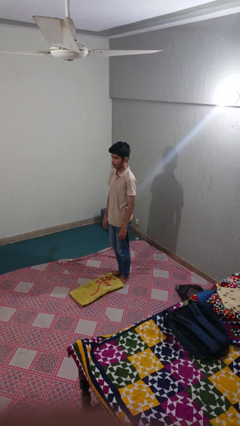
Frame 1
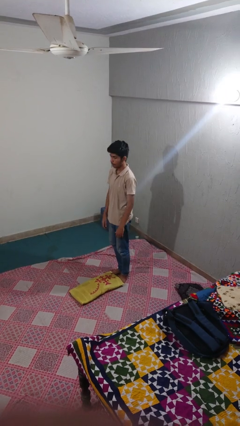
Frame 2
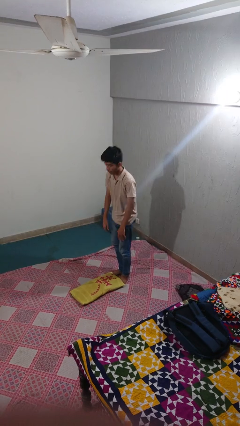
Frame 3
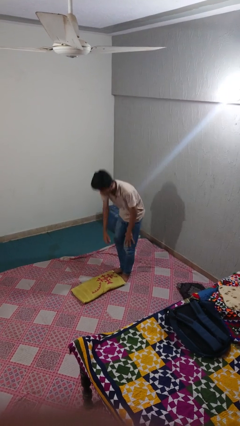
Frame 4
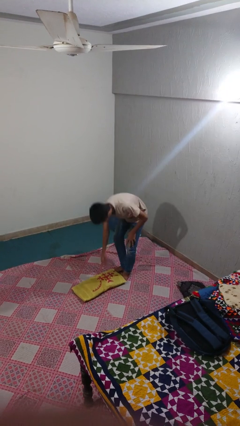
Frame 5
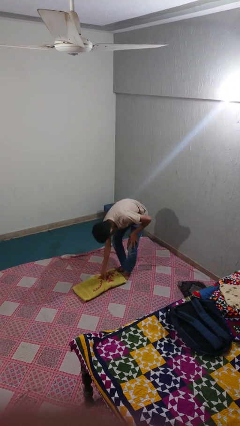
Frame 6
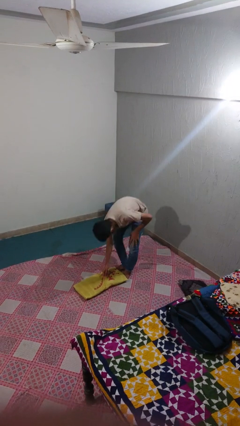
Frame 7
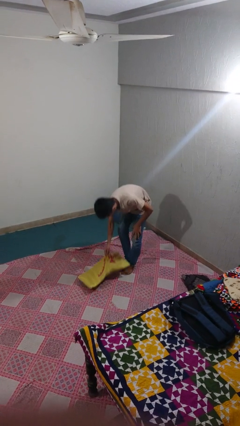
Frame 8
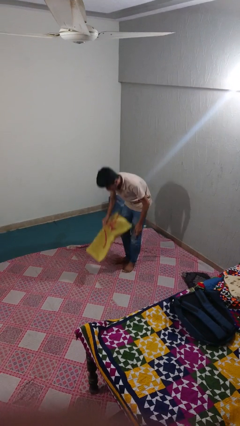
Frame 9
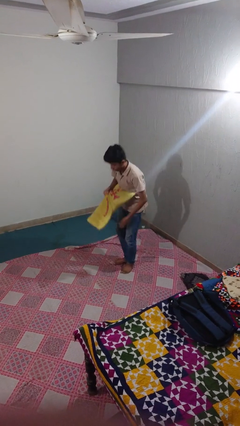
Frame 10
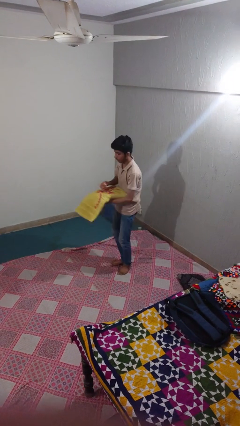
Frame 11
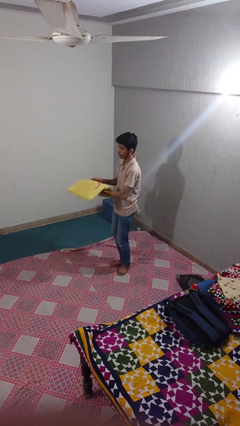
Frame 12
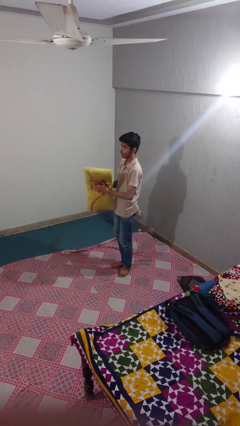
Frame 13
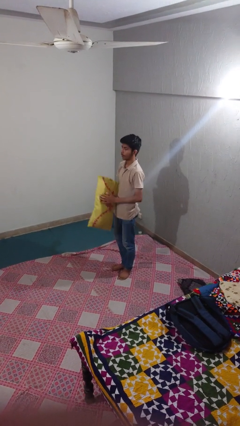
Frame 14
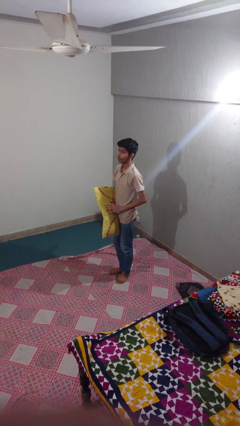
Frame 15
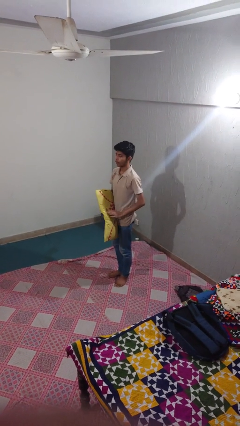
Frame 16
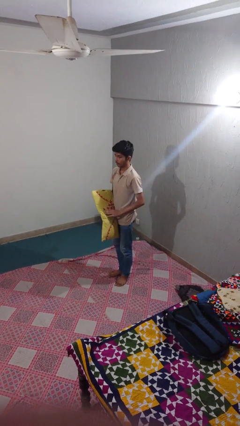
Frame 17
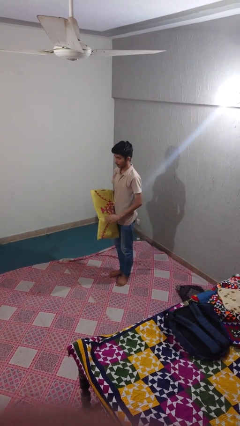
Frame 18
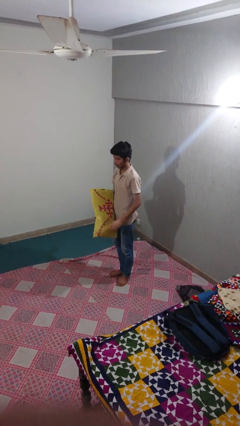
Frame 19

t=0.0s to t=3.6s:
person picks up object from floor

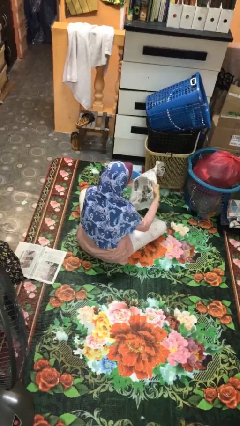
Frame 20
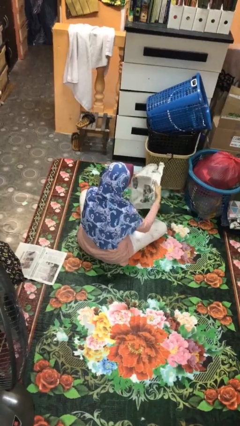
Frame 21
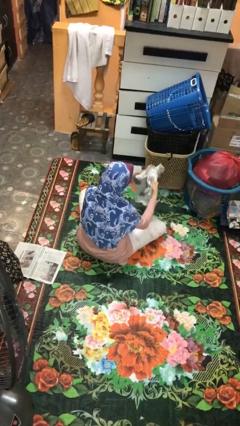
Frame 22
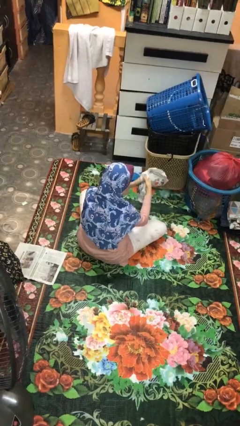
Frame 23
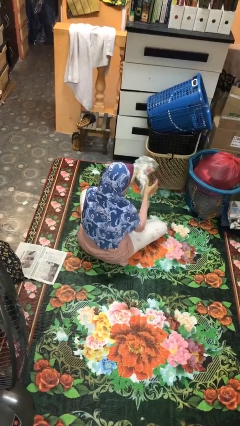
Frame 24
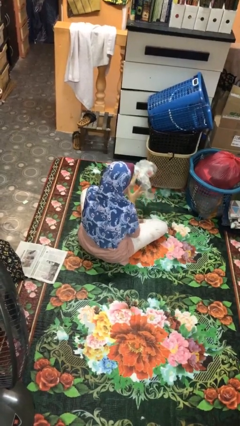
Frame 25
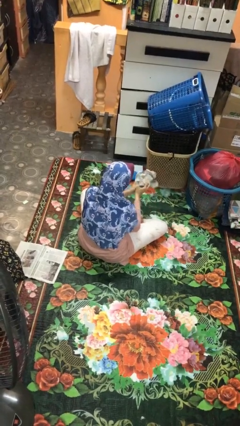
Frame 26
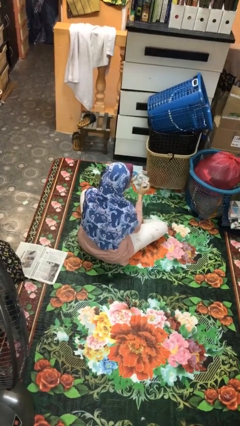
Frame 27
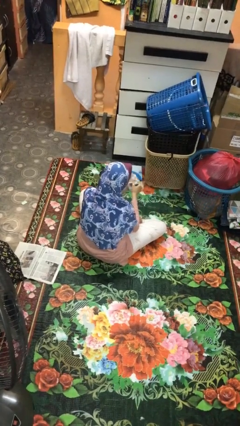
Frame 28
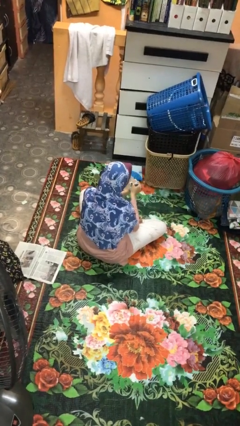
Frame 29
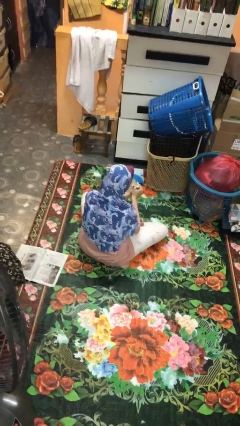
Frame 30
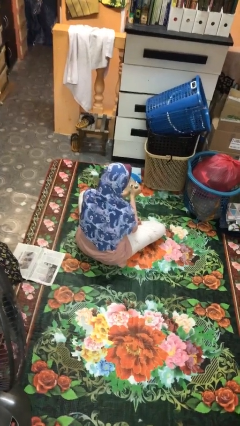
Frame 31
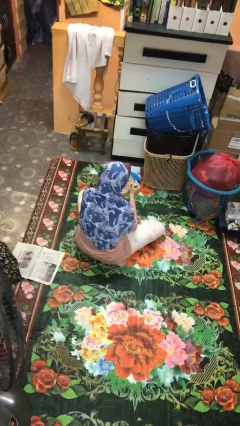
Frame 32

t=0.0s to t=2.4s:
person crumples paper

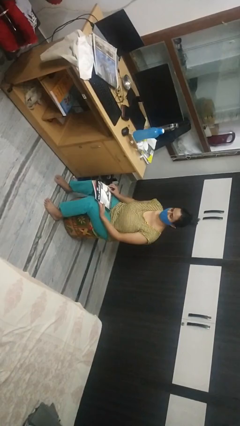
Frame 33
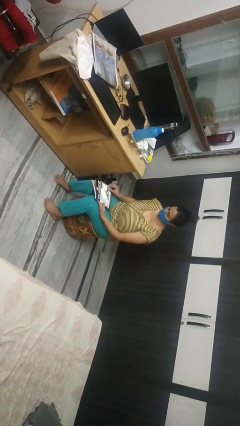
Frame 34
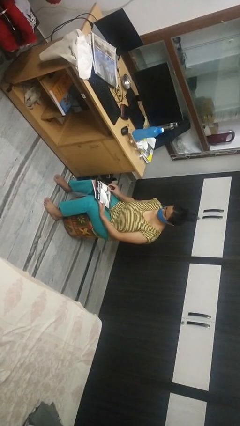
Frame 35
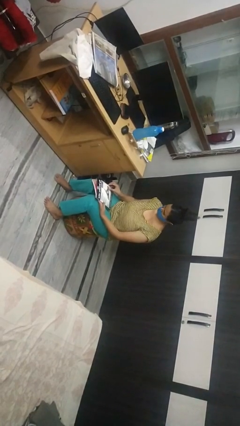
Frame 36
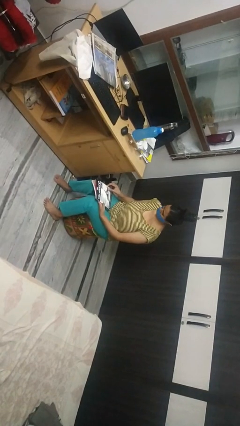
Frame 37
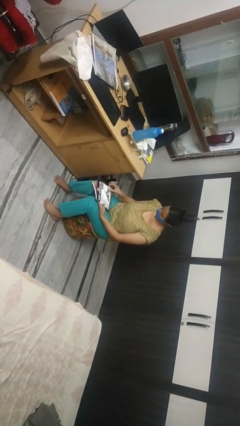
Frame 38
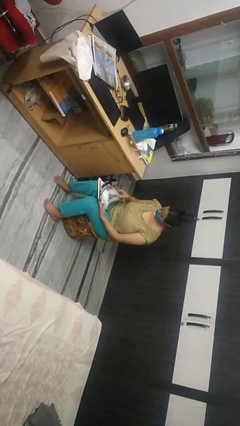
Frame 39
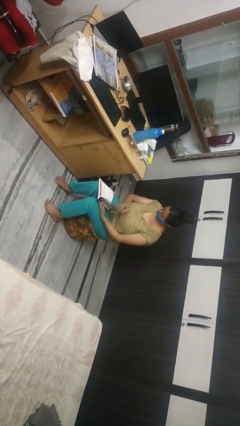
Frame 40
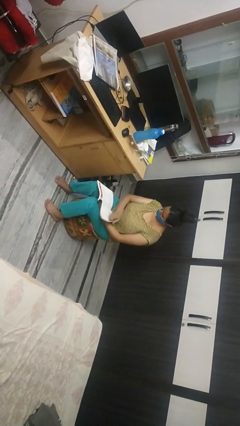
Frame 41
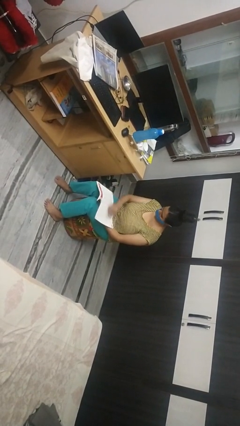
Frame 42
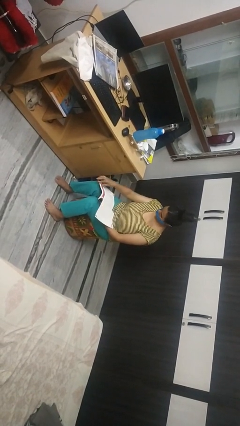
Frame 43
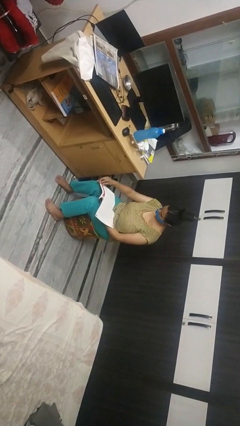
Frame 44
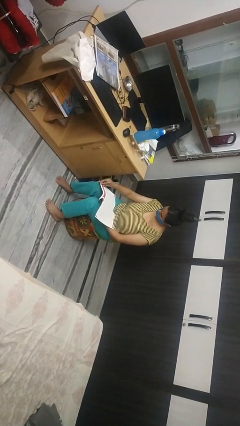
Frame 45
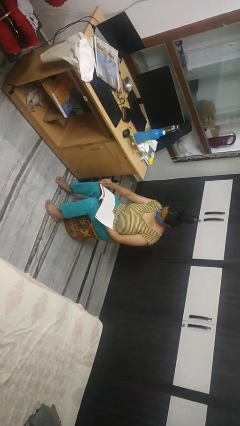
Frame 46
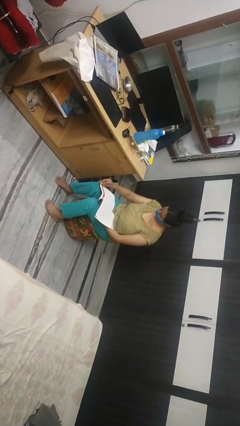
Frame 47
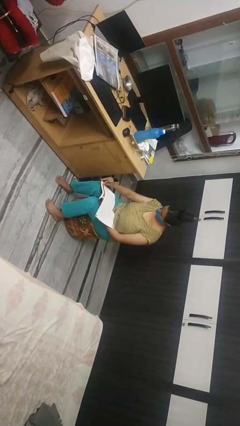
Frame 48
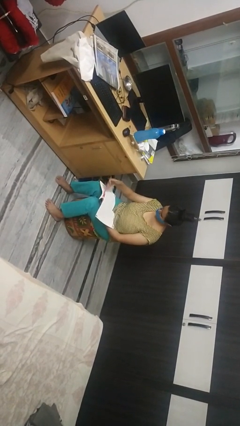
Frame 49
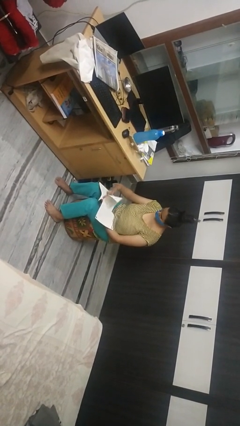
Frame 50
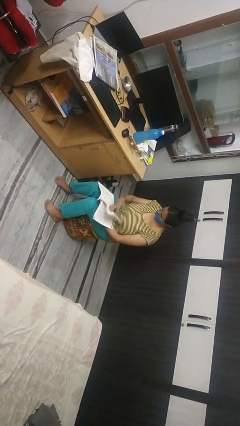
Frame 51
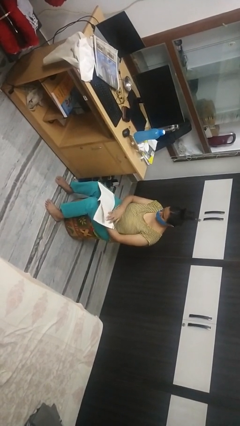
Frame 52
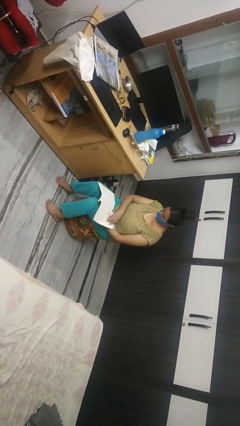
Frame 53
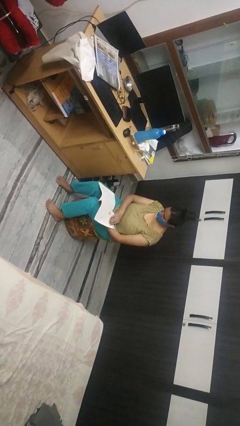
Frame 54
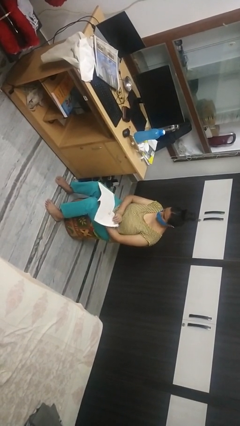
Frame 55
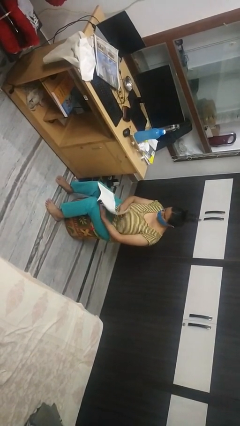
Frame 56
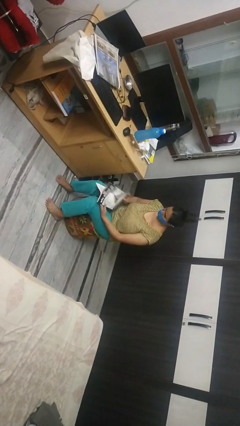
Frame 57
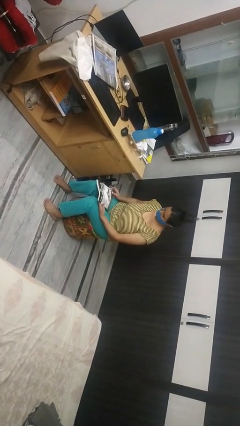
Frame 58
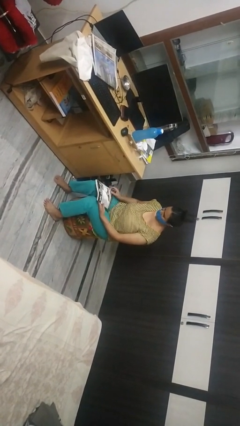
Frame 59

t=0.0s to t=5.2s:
person reads magazine

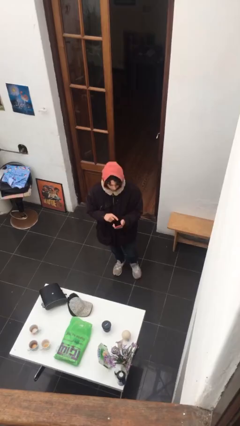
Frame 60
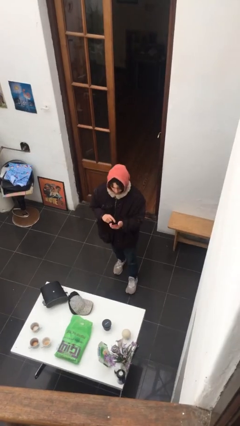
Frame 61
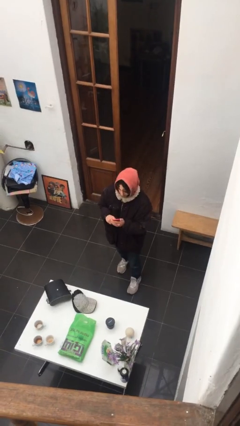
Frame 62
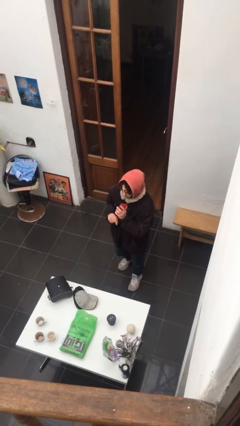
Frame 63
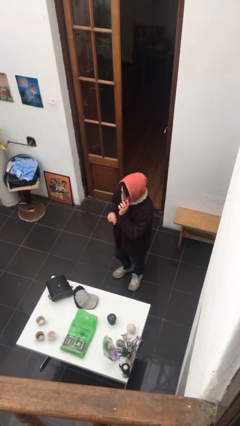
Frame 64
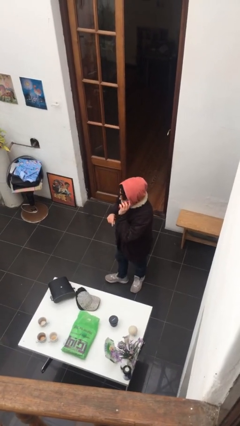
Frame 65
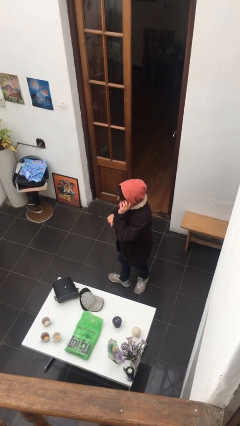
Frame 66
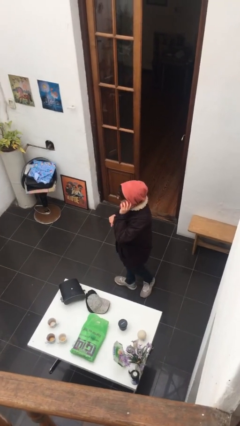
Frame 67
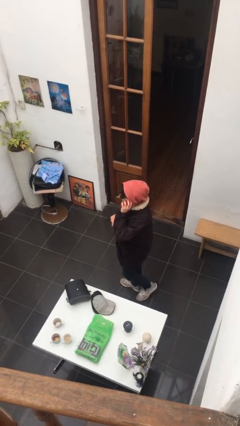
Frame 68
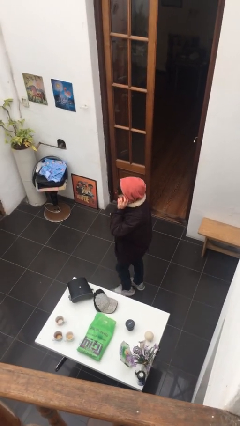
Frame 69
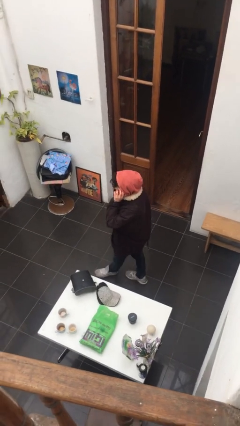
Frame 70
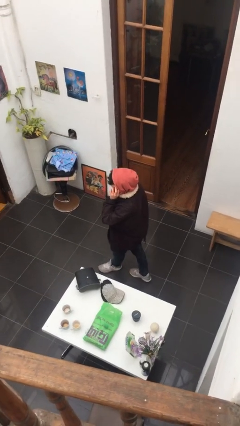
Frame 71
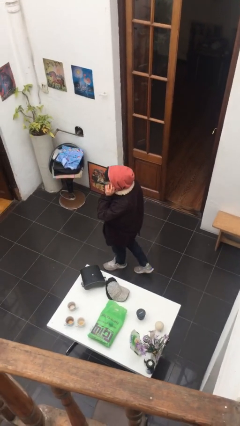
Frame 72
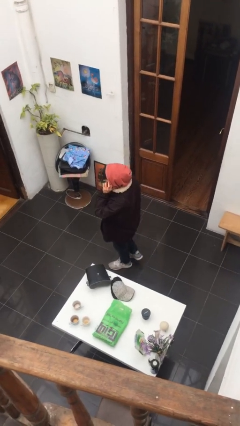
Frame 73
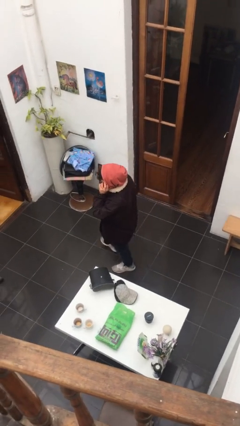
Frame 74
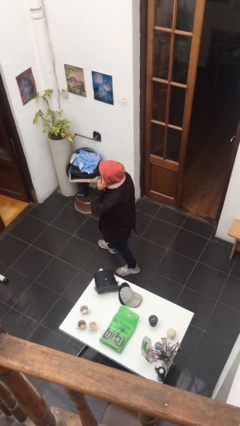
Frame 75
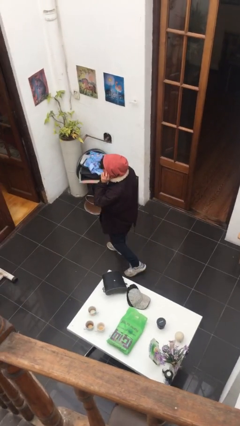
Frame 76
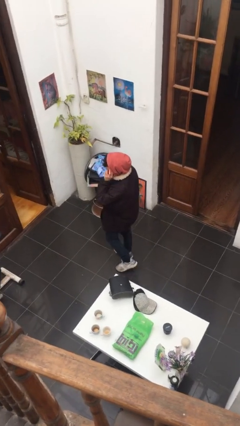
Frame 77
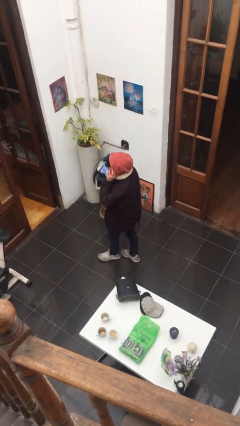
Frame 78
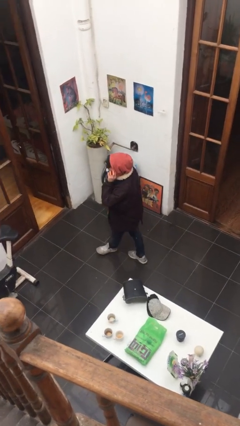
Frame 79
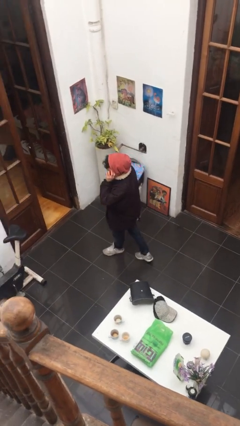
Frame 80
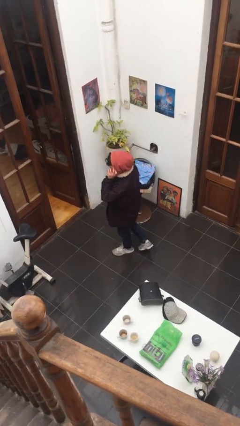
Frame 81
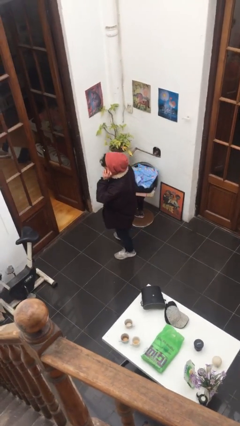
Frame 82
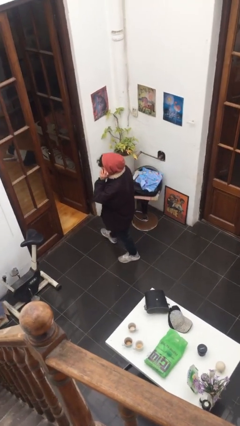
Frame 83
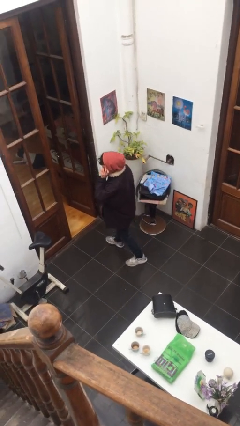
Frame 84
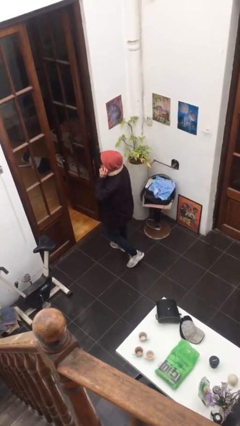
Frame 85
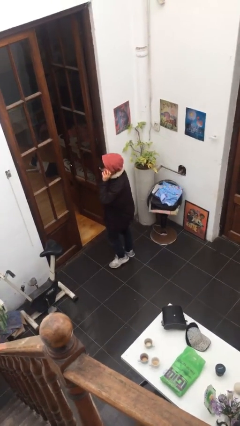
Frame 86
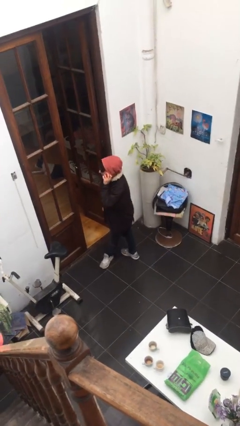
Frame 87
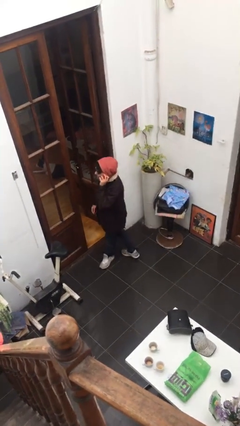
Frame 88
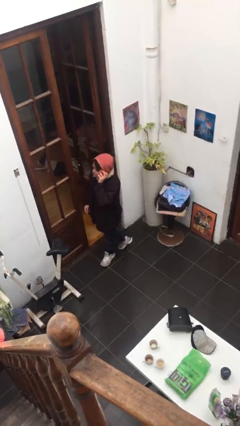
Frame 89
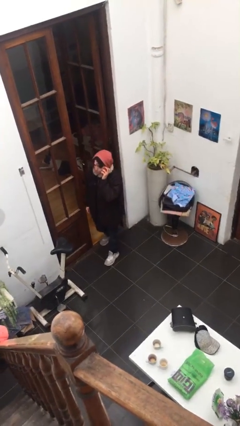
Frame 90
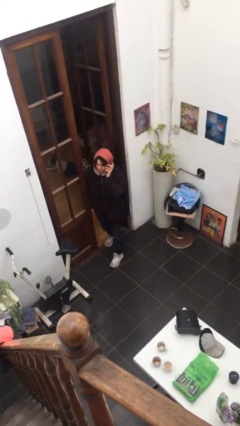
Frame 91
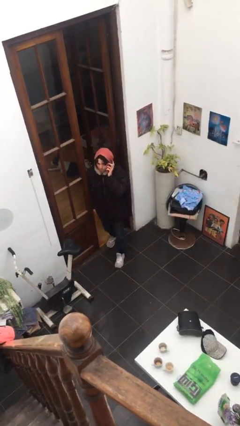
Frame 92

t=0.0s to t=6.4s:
person talks on phone

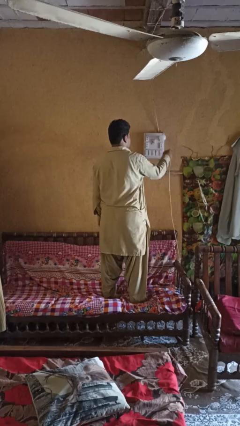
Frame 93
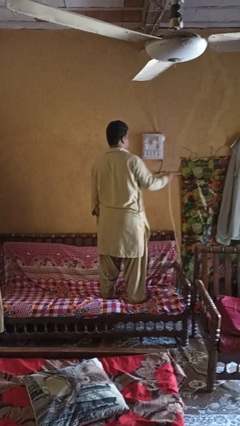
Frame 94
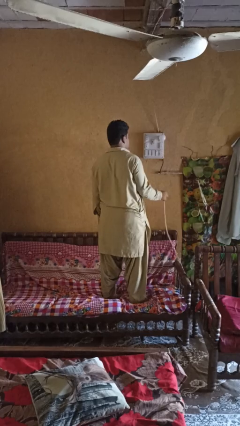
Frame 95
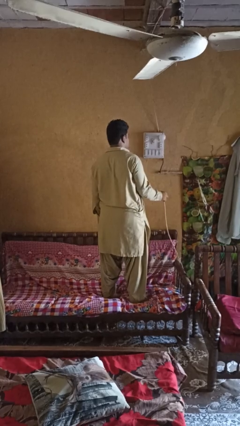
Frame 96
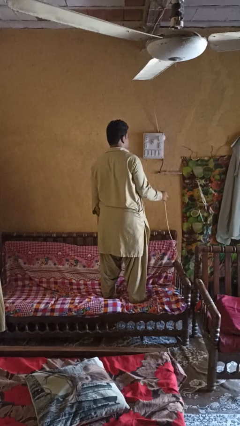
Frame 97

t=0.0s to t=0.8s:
person unplugs from electrical socket
